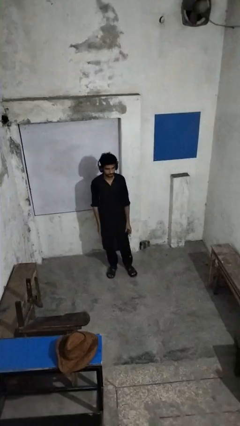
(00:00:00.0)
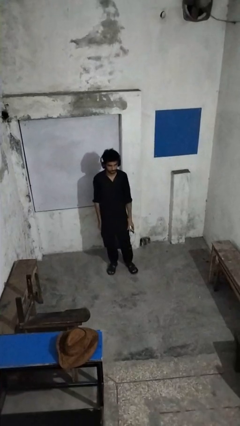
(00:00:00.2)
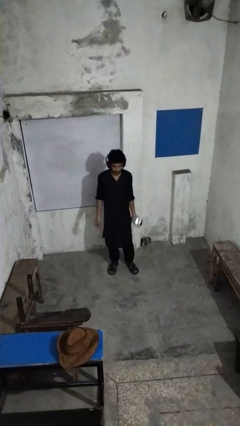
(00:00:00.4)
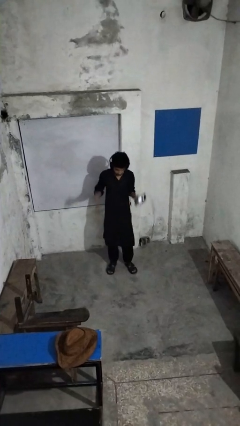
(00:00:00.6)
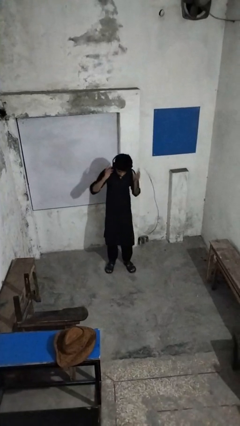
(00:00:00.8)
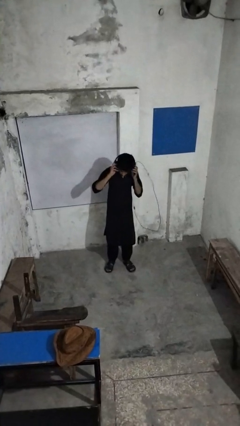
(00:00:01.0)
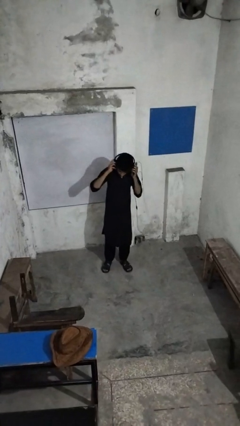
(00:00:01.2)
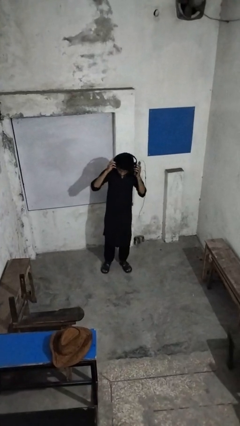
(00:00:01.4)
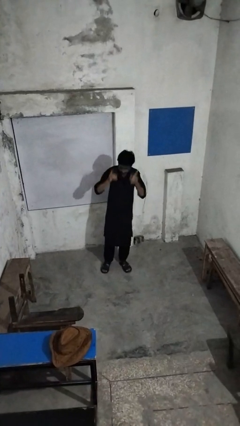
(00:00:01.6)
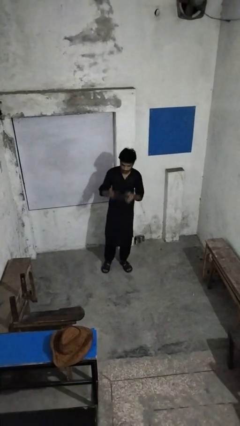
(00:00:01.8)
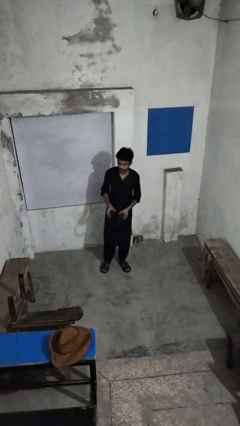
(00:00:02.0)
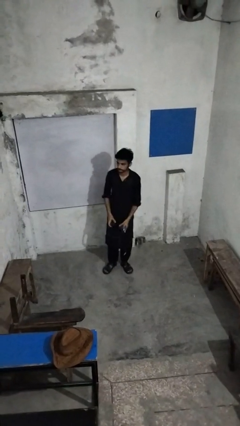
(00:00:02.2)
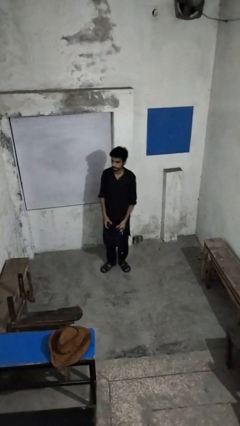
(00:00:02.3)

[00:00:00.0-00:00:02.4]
person takes off headphones

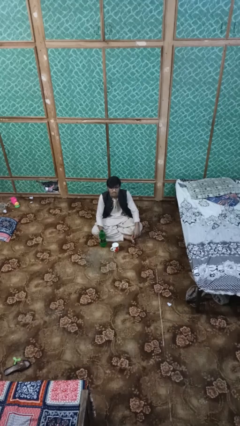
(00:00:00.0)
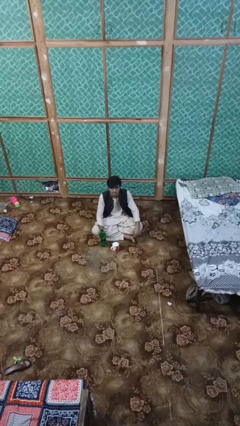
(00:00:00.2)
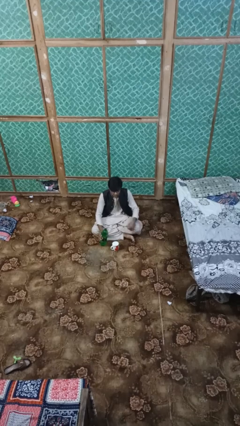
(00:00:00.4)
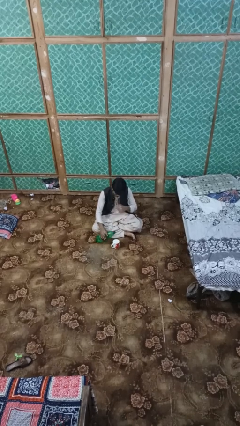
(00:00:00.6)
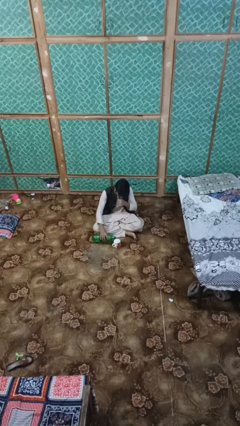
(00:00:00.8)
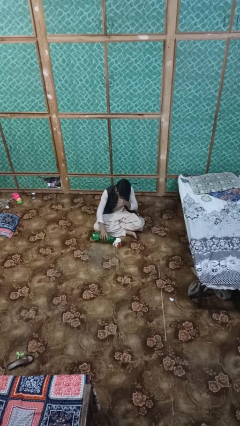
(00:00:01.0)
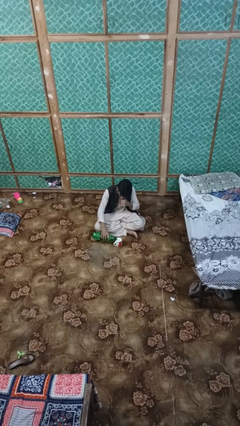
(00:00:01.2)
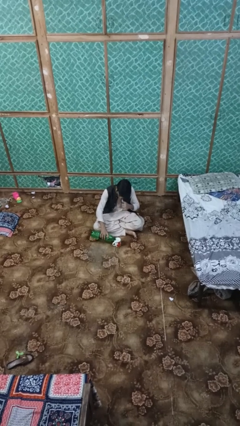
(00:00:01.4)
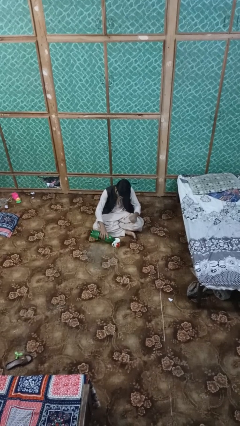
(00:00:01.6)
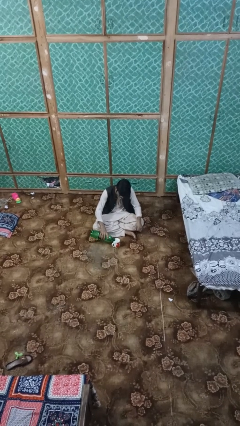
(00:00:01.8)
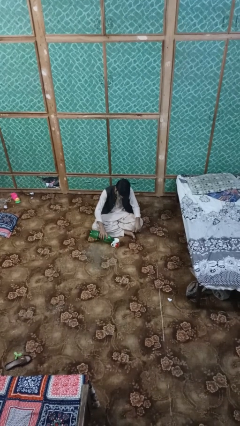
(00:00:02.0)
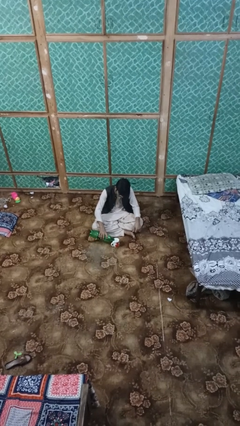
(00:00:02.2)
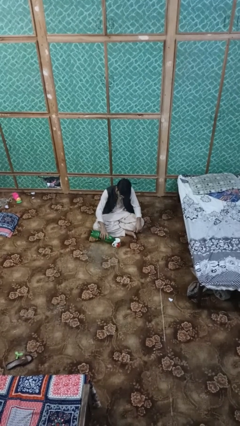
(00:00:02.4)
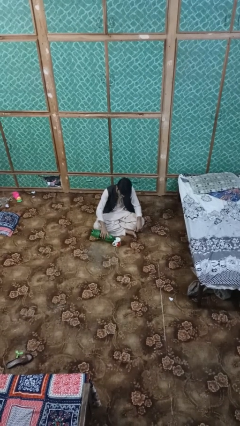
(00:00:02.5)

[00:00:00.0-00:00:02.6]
person pours liquid into cup

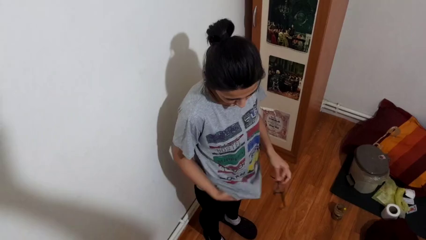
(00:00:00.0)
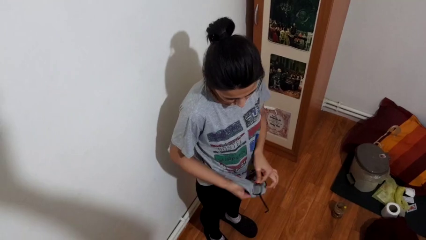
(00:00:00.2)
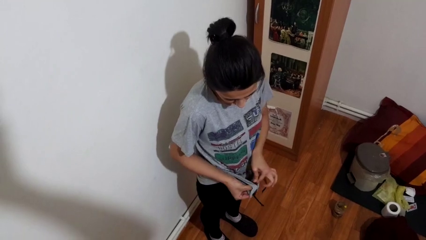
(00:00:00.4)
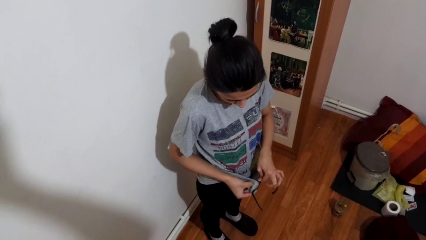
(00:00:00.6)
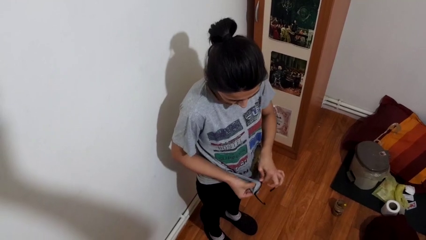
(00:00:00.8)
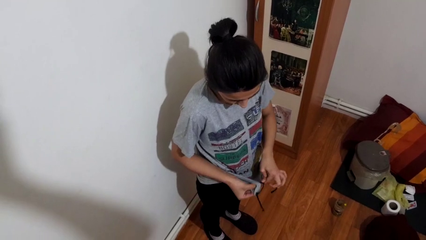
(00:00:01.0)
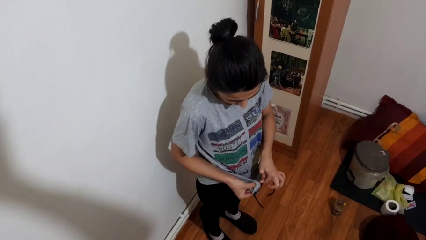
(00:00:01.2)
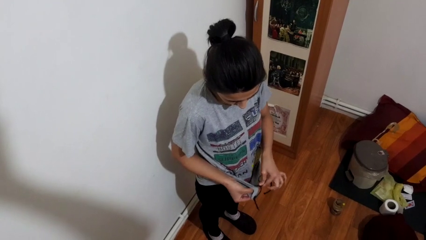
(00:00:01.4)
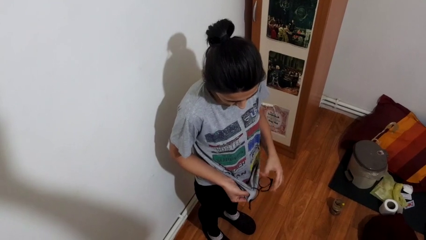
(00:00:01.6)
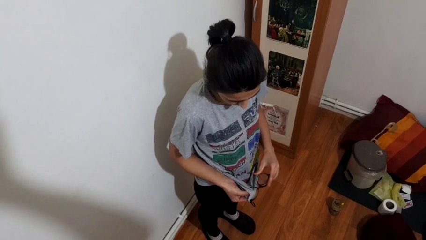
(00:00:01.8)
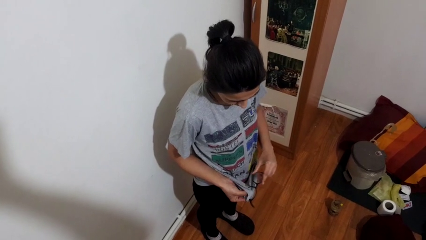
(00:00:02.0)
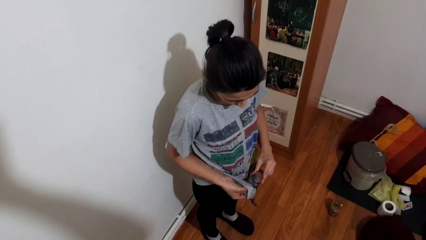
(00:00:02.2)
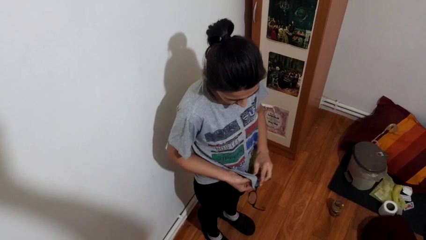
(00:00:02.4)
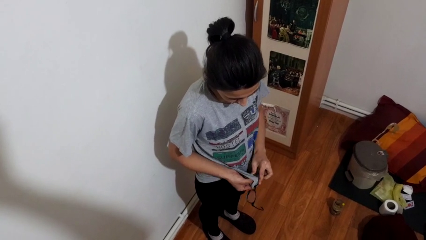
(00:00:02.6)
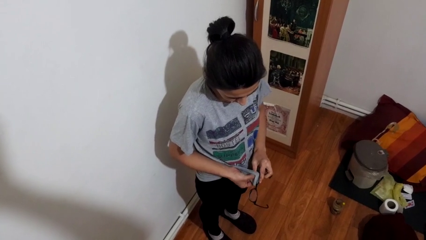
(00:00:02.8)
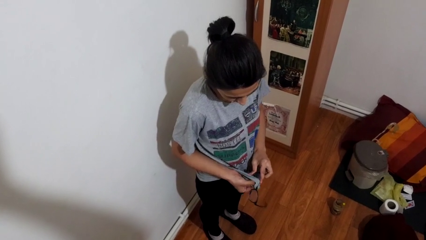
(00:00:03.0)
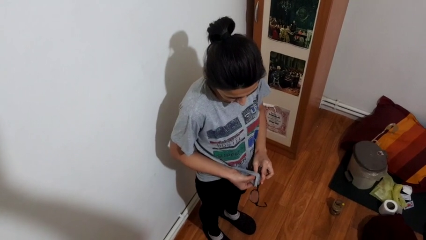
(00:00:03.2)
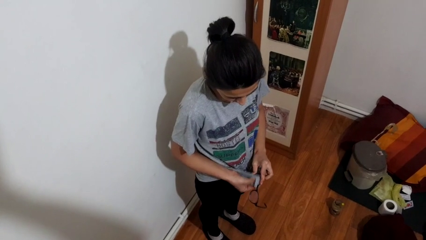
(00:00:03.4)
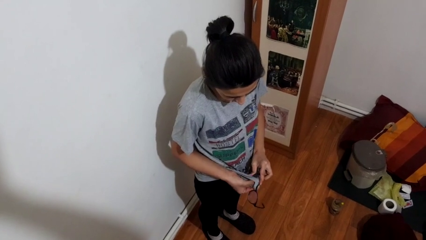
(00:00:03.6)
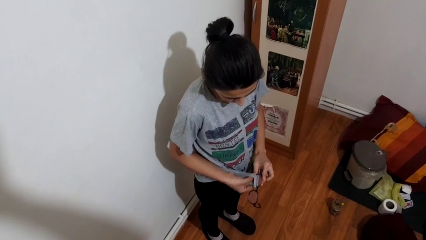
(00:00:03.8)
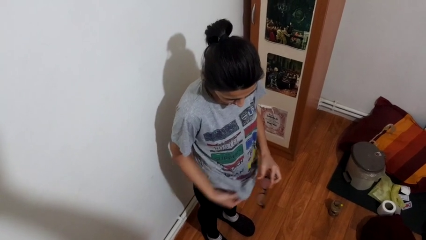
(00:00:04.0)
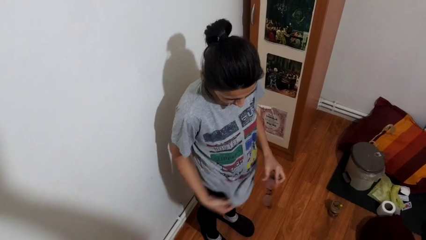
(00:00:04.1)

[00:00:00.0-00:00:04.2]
person cleans eyeglasses

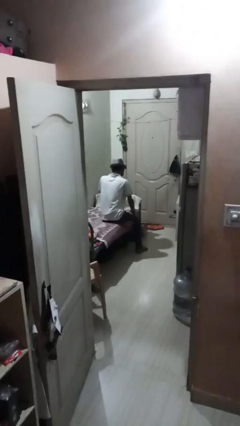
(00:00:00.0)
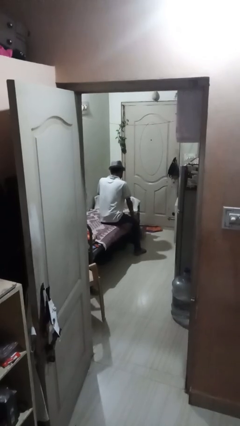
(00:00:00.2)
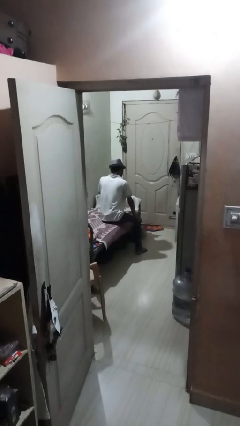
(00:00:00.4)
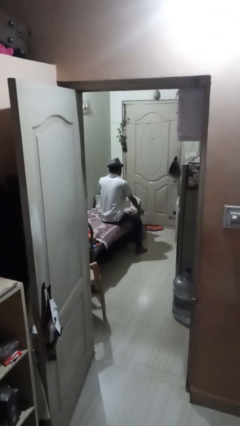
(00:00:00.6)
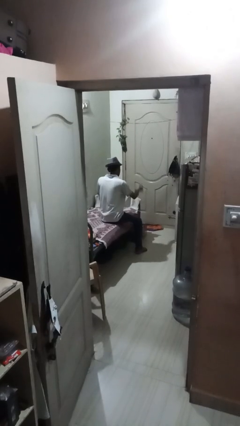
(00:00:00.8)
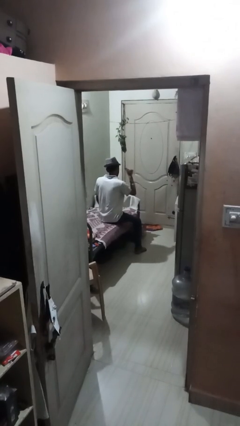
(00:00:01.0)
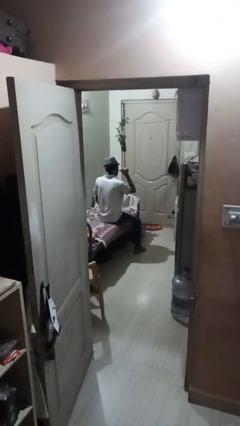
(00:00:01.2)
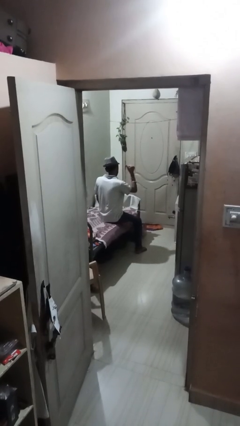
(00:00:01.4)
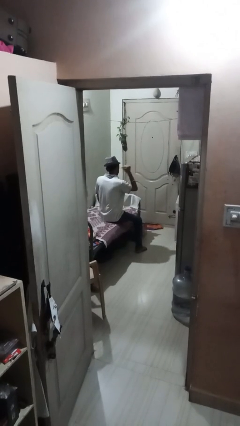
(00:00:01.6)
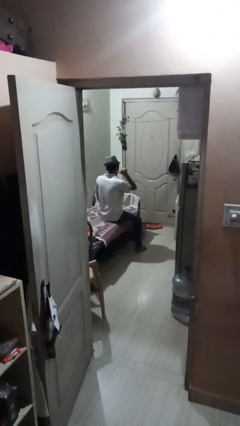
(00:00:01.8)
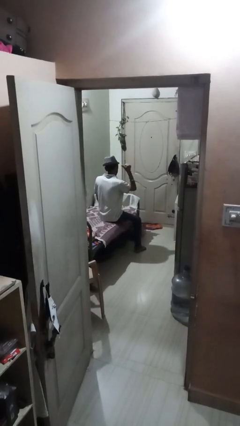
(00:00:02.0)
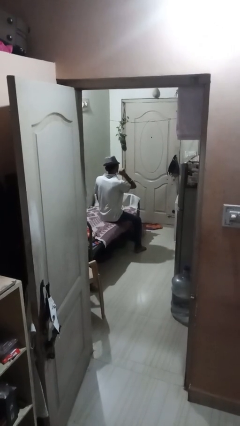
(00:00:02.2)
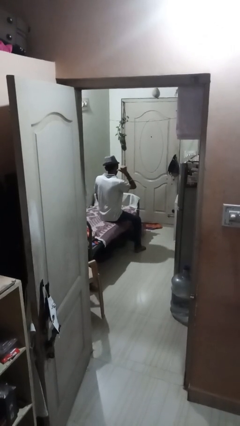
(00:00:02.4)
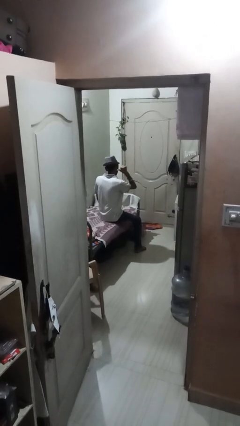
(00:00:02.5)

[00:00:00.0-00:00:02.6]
person gestures behind me

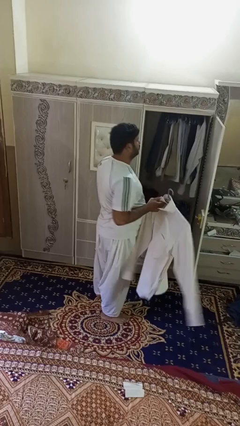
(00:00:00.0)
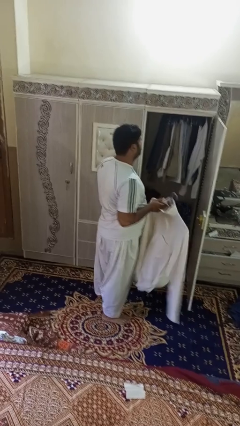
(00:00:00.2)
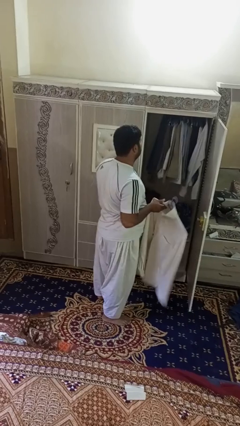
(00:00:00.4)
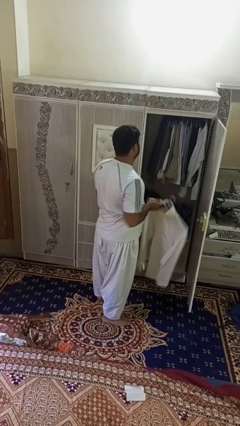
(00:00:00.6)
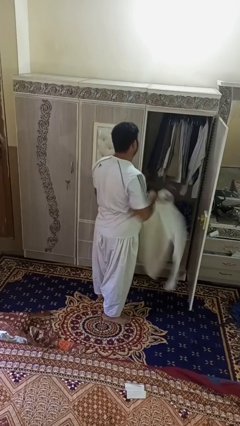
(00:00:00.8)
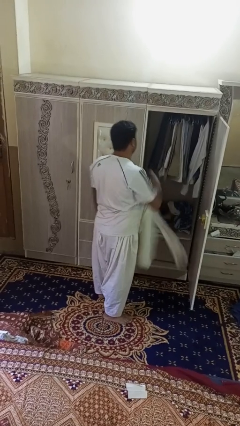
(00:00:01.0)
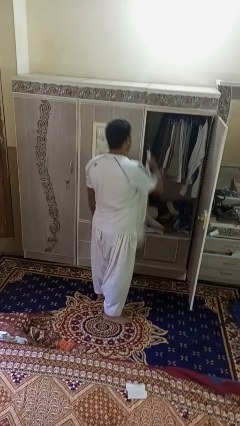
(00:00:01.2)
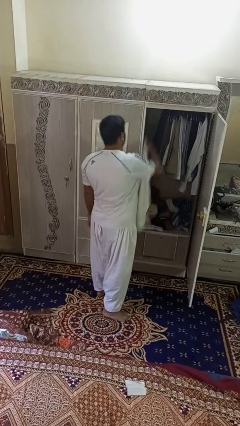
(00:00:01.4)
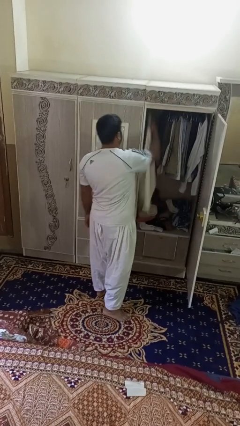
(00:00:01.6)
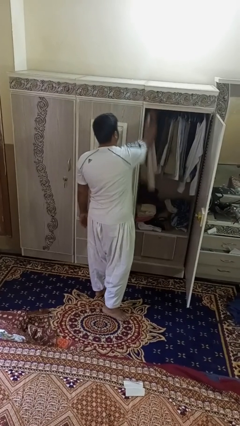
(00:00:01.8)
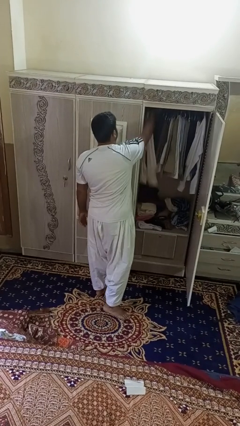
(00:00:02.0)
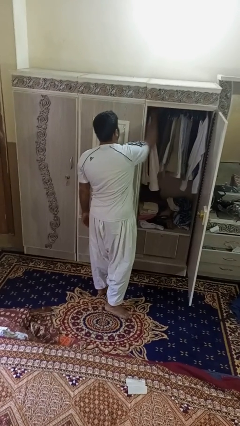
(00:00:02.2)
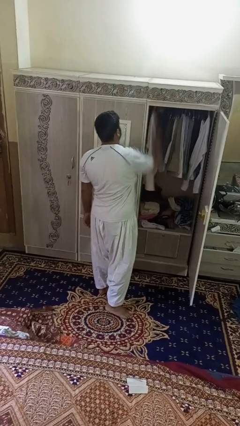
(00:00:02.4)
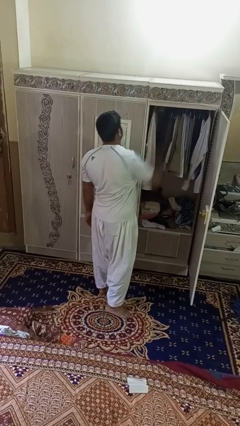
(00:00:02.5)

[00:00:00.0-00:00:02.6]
person puts clothes into closet

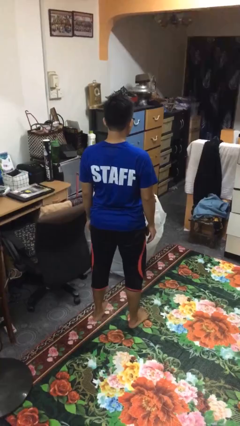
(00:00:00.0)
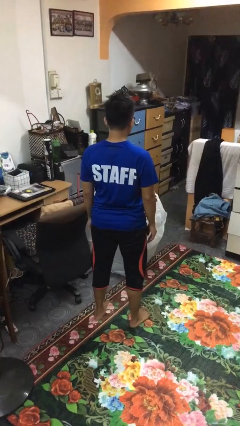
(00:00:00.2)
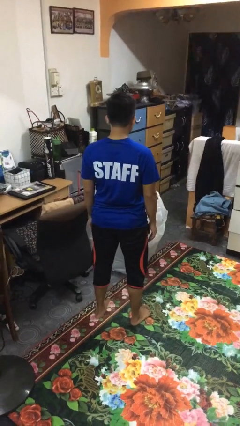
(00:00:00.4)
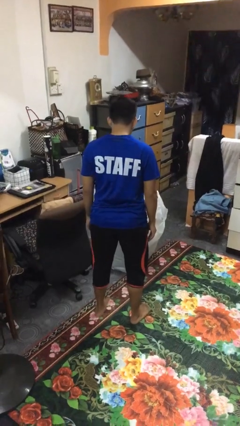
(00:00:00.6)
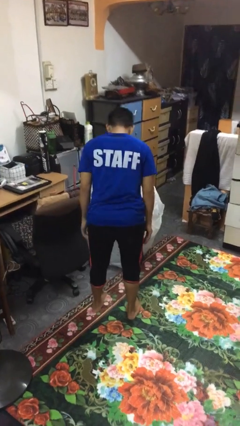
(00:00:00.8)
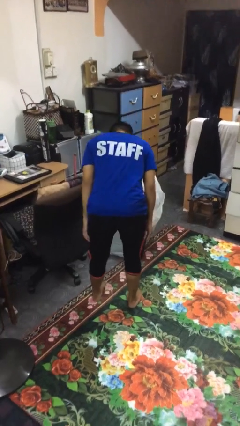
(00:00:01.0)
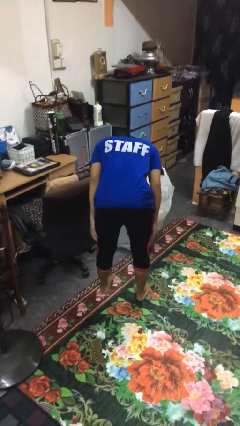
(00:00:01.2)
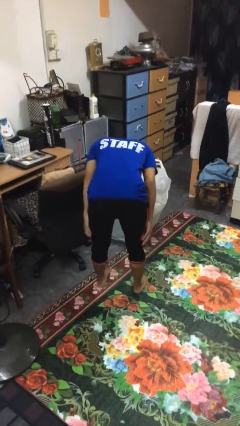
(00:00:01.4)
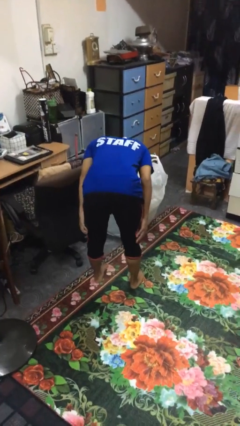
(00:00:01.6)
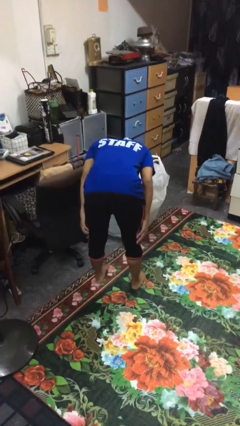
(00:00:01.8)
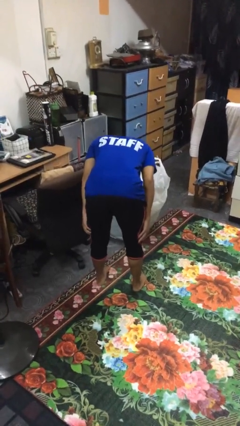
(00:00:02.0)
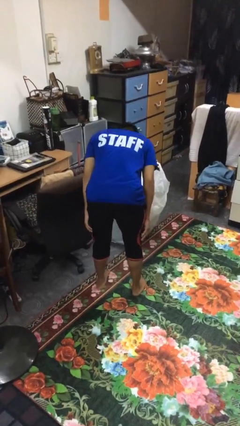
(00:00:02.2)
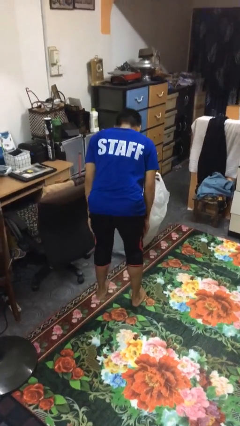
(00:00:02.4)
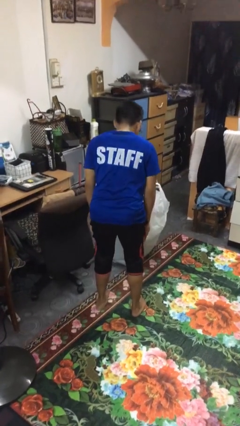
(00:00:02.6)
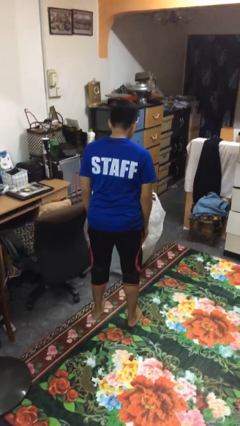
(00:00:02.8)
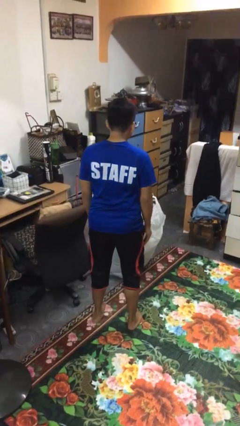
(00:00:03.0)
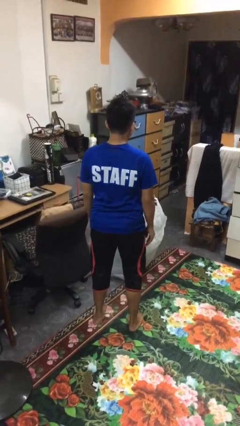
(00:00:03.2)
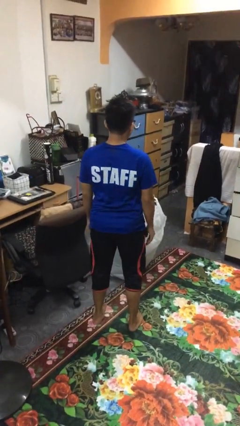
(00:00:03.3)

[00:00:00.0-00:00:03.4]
person bows
